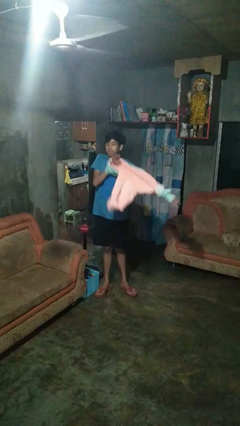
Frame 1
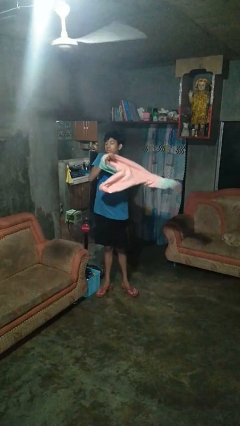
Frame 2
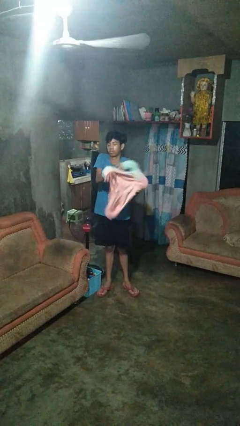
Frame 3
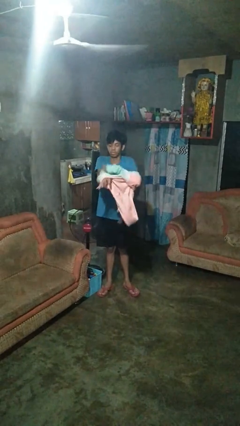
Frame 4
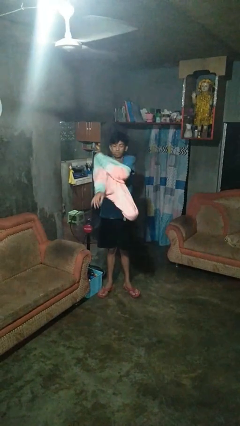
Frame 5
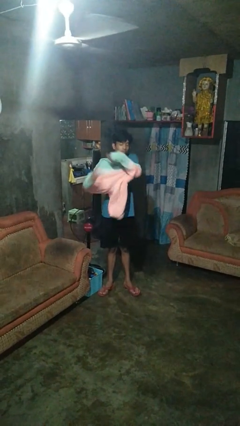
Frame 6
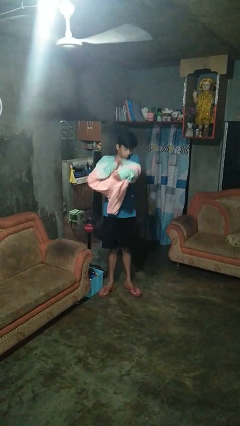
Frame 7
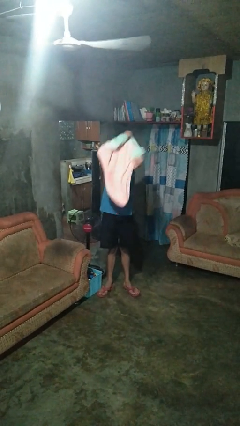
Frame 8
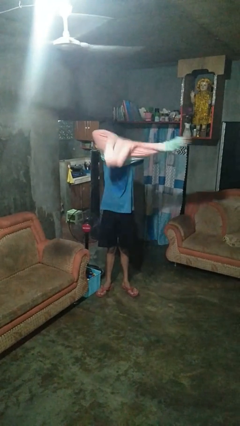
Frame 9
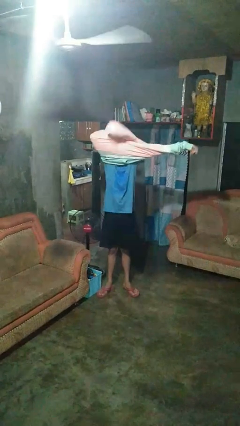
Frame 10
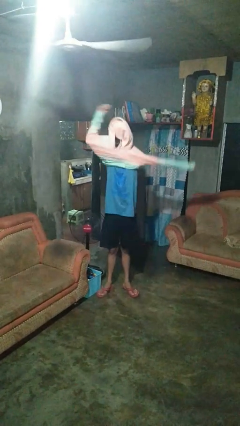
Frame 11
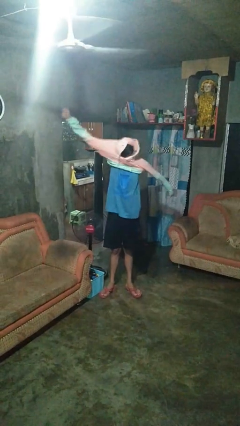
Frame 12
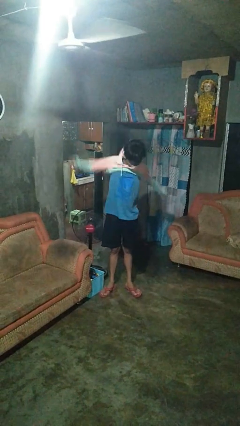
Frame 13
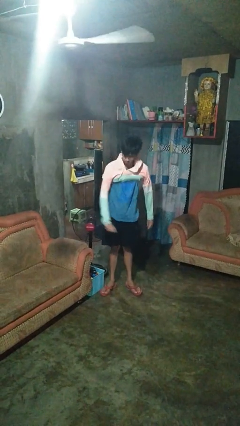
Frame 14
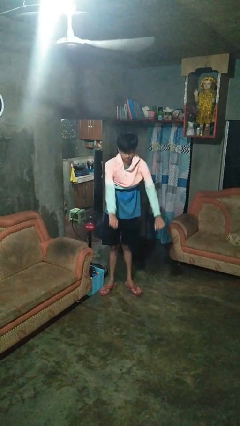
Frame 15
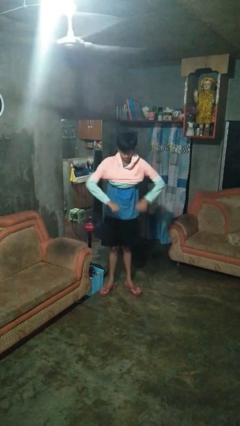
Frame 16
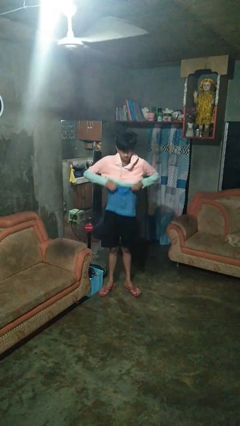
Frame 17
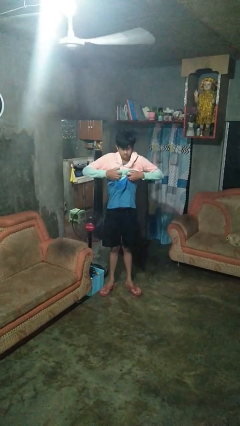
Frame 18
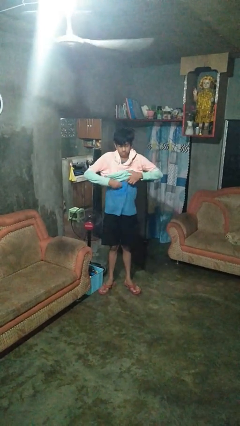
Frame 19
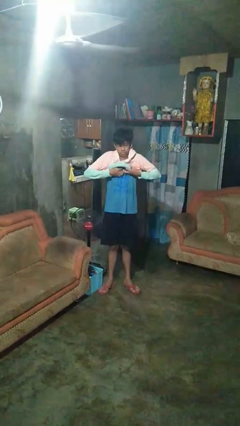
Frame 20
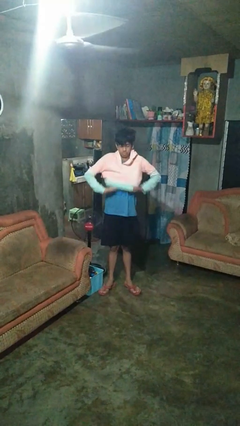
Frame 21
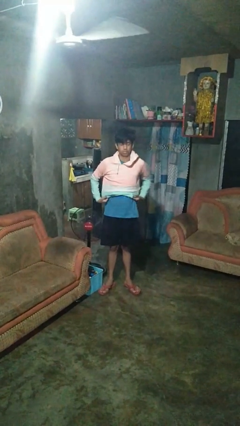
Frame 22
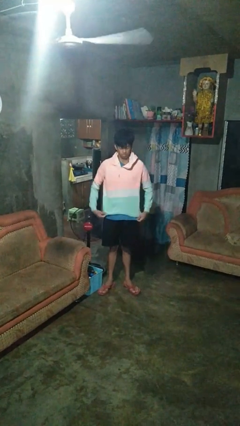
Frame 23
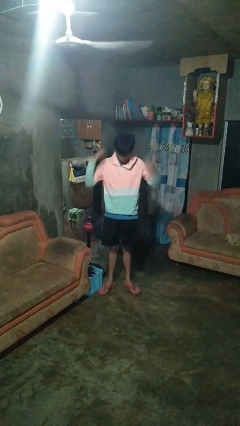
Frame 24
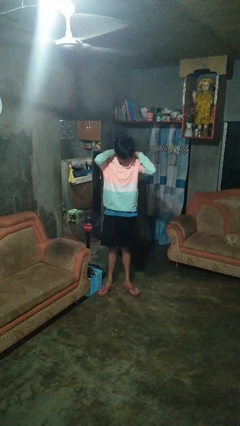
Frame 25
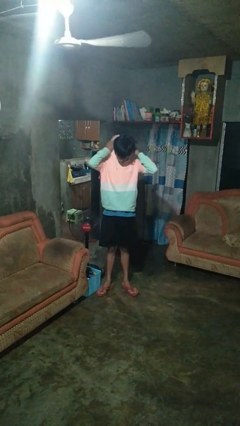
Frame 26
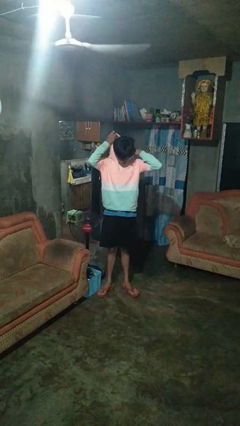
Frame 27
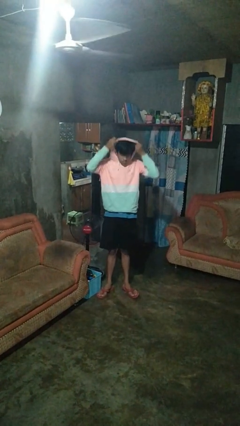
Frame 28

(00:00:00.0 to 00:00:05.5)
person puts on hoodie

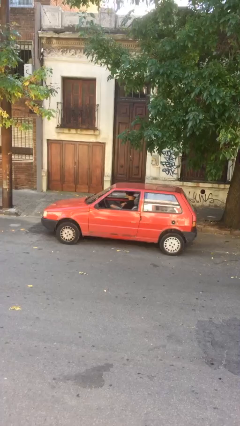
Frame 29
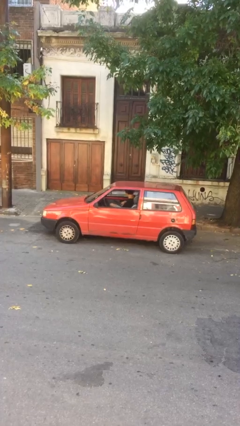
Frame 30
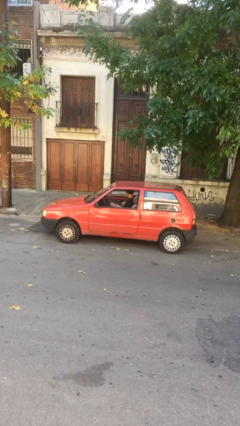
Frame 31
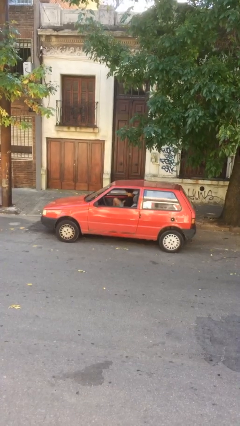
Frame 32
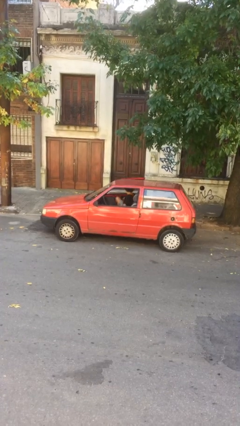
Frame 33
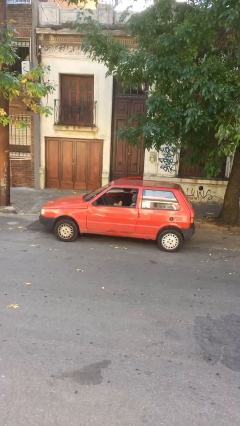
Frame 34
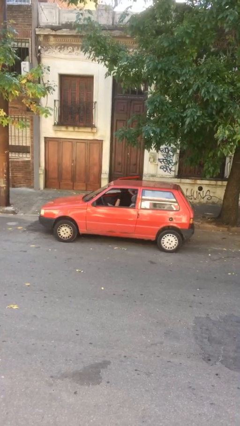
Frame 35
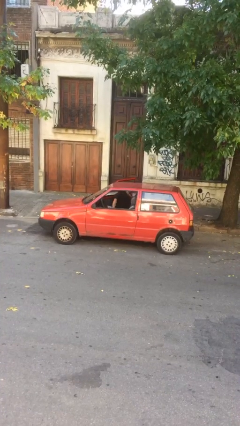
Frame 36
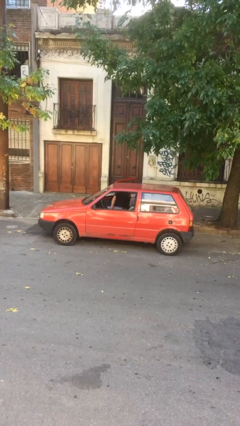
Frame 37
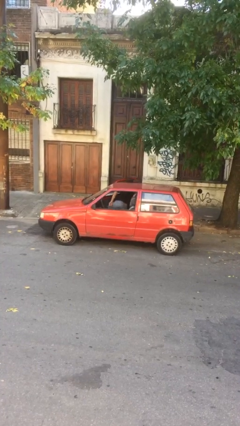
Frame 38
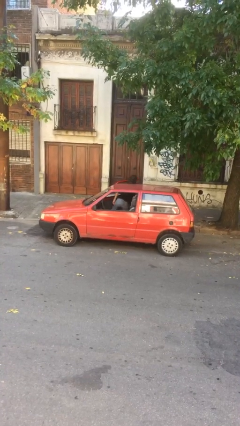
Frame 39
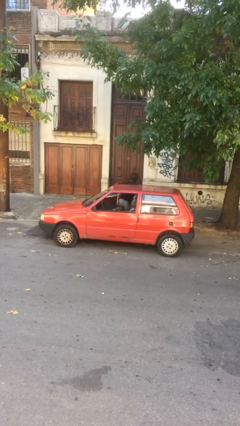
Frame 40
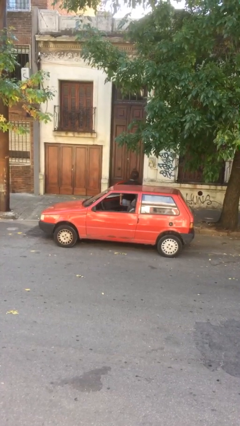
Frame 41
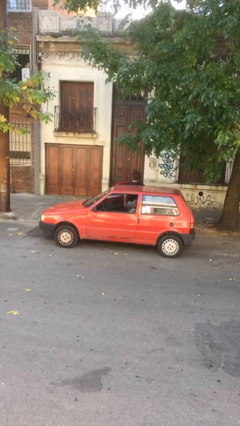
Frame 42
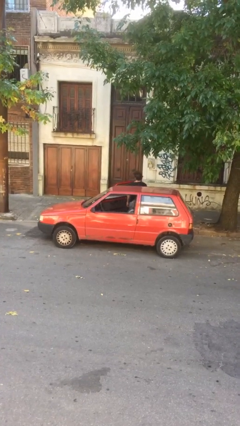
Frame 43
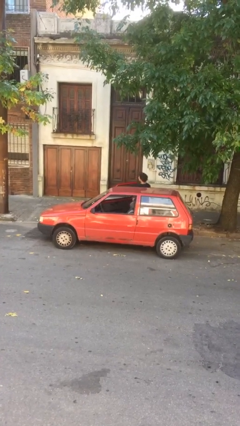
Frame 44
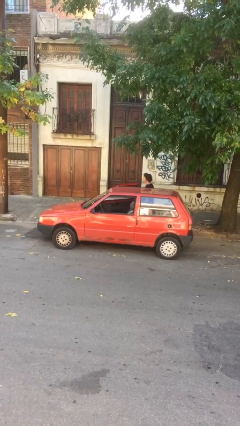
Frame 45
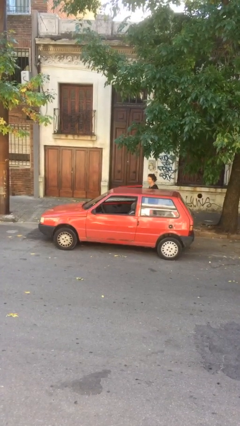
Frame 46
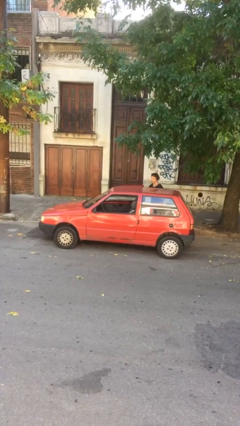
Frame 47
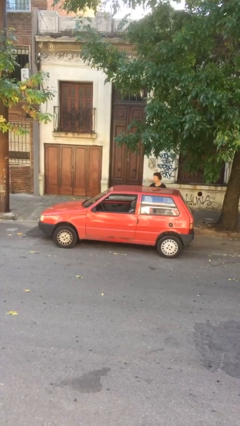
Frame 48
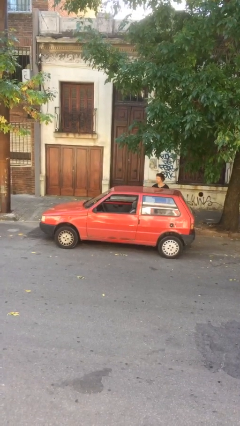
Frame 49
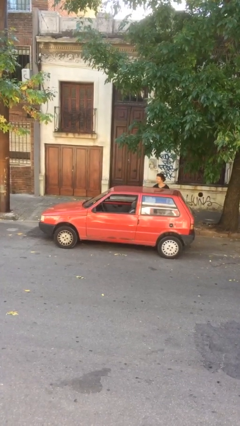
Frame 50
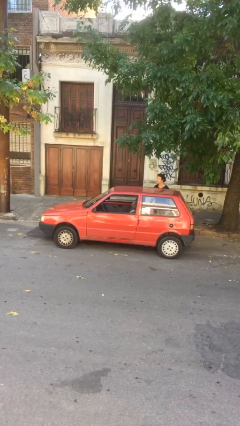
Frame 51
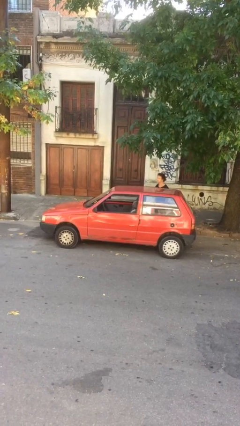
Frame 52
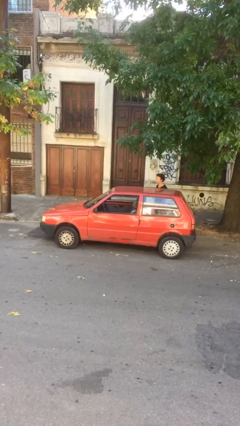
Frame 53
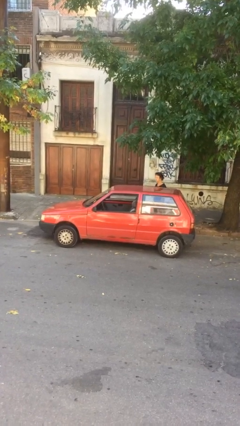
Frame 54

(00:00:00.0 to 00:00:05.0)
car drops off person

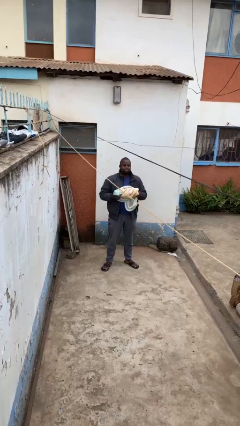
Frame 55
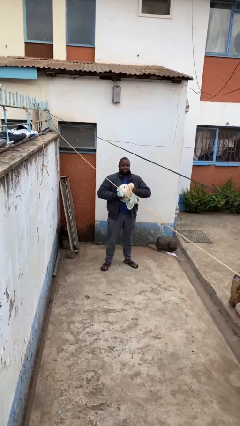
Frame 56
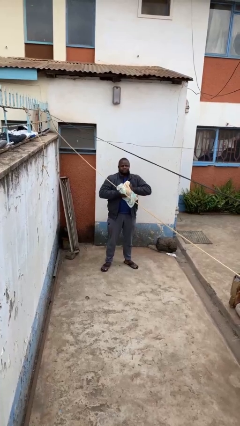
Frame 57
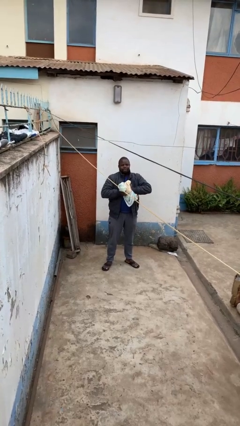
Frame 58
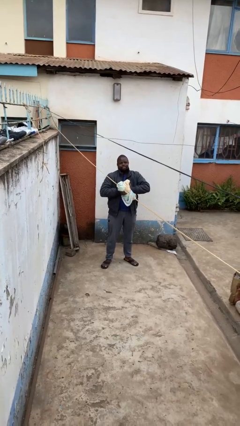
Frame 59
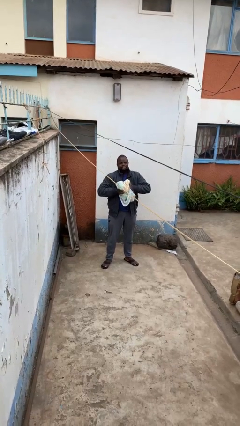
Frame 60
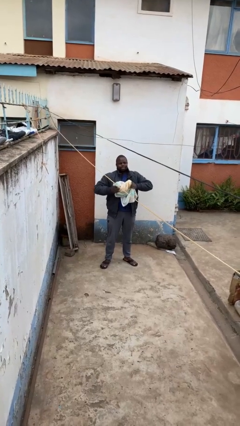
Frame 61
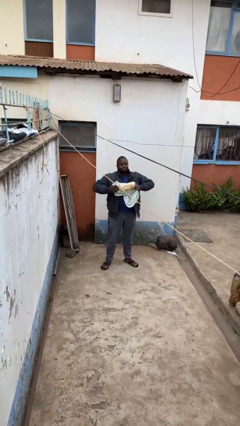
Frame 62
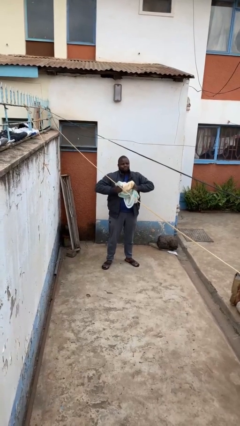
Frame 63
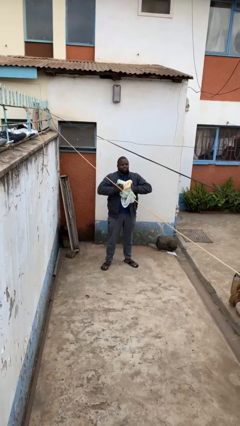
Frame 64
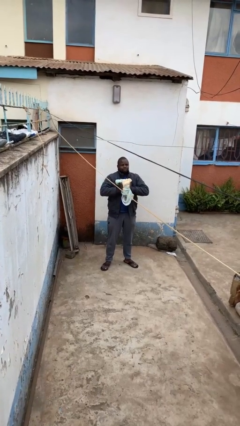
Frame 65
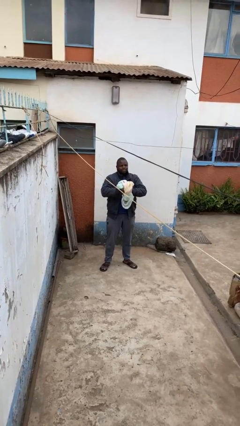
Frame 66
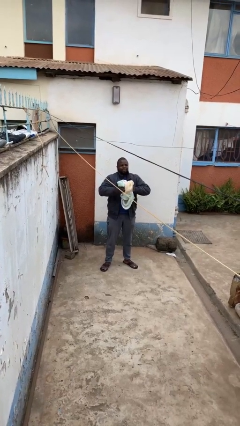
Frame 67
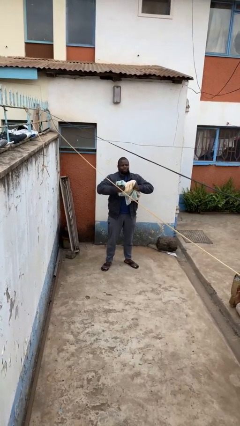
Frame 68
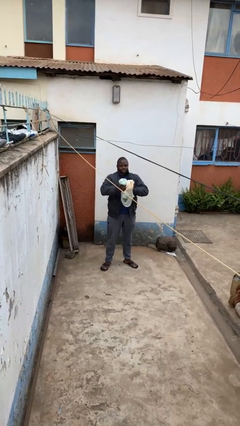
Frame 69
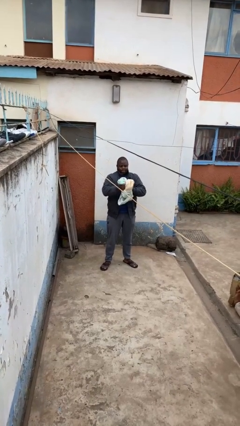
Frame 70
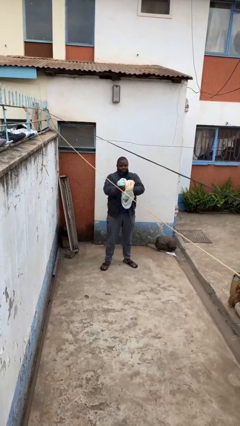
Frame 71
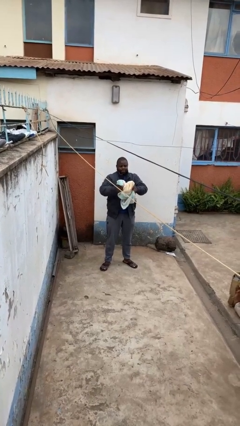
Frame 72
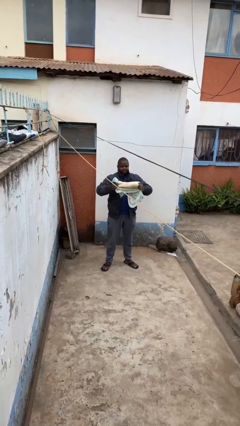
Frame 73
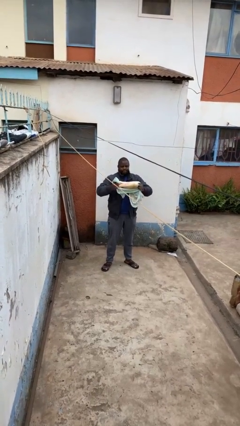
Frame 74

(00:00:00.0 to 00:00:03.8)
person squeezes object

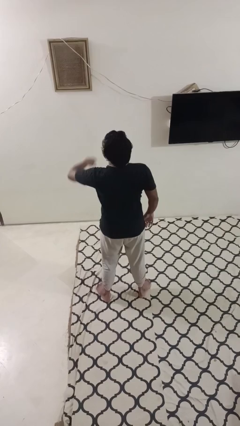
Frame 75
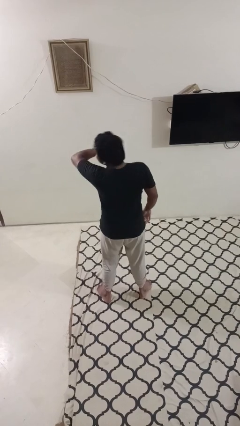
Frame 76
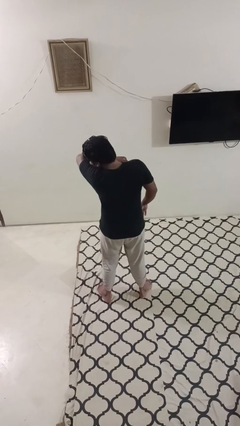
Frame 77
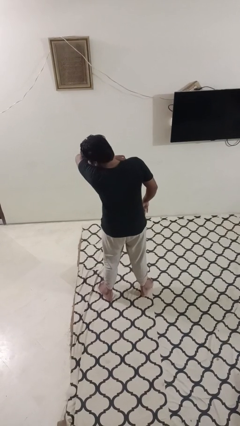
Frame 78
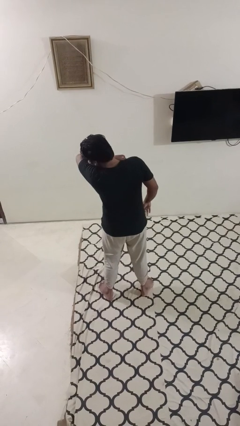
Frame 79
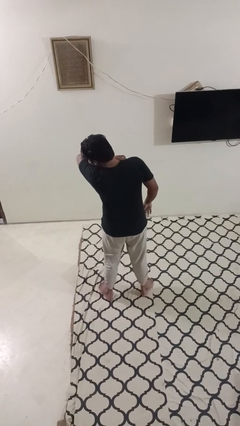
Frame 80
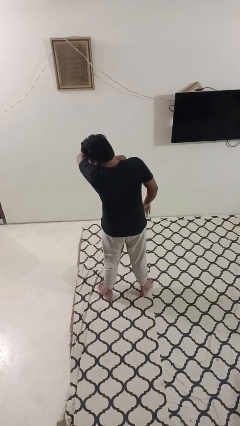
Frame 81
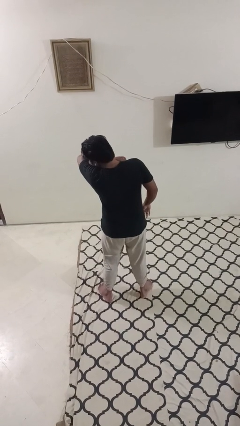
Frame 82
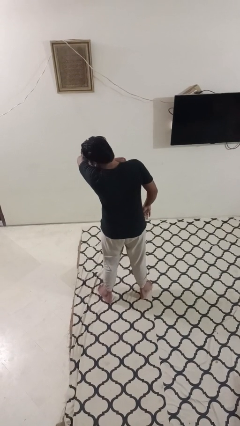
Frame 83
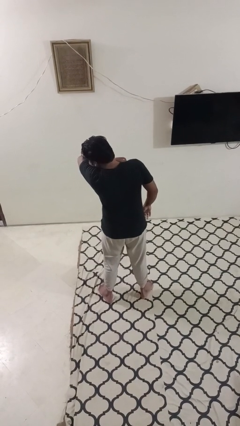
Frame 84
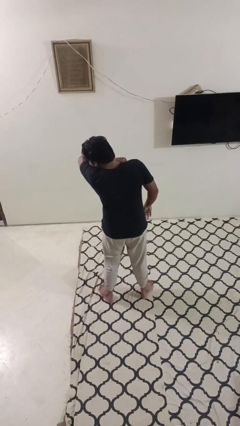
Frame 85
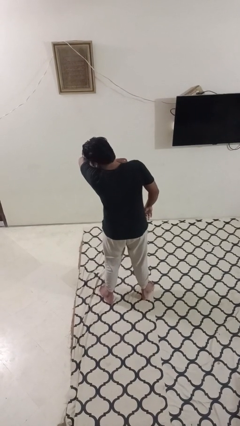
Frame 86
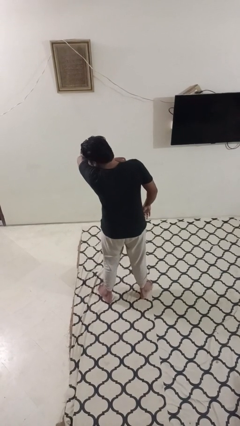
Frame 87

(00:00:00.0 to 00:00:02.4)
person sneezes into arm

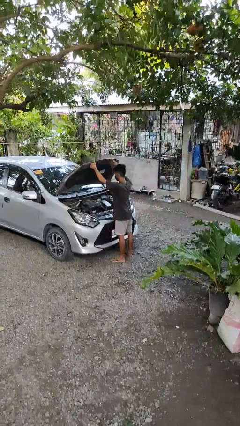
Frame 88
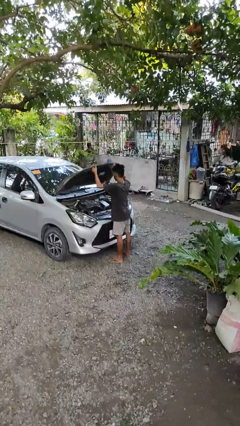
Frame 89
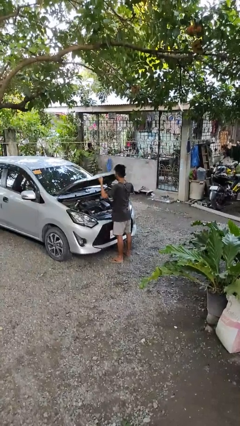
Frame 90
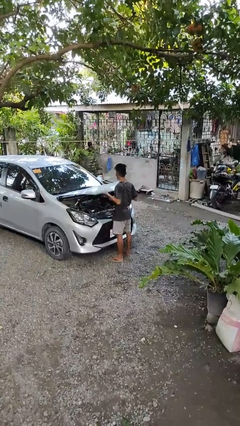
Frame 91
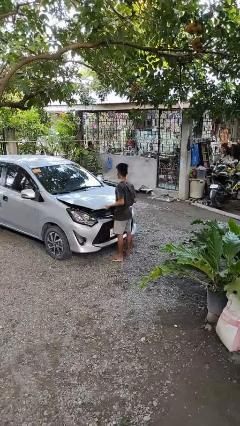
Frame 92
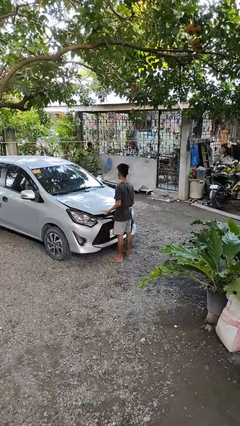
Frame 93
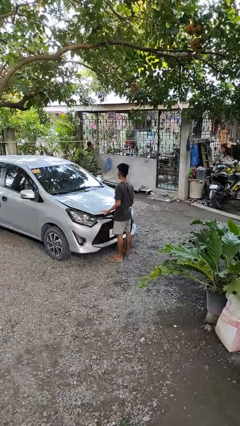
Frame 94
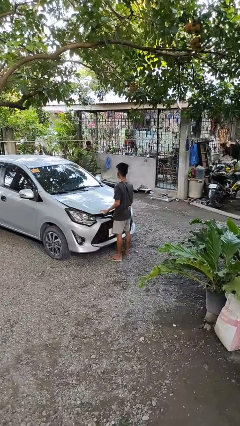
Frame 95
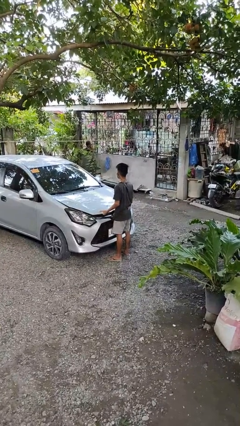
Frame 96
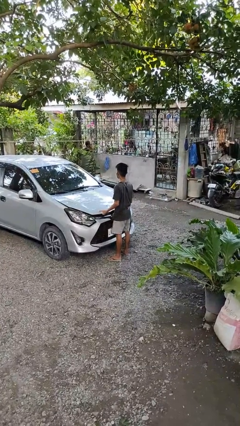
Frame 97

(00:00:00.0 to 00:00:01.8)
person closes car hood
